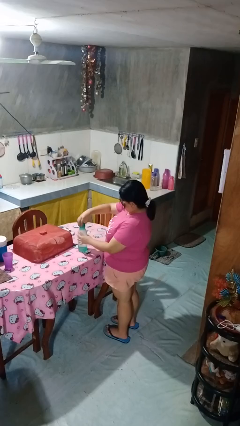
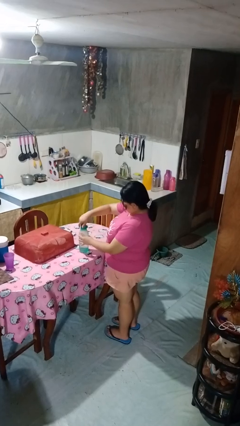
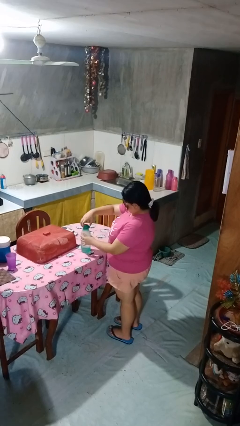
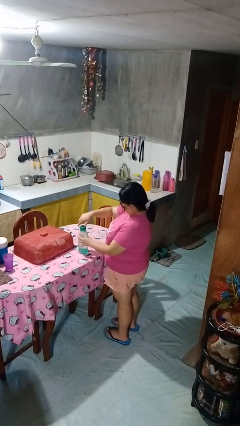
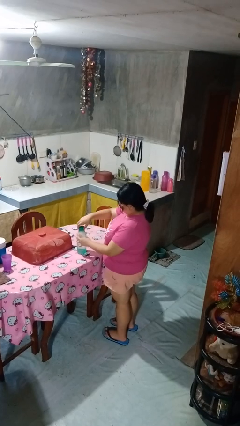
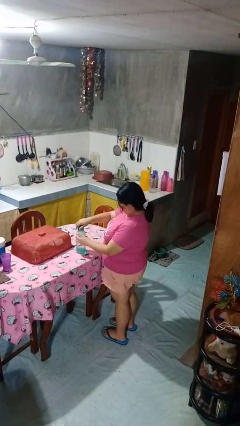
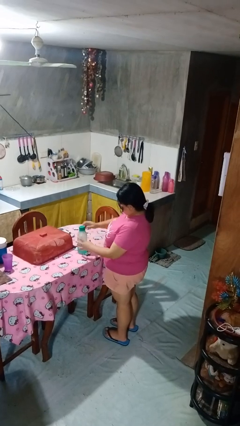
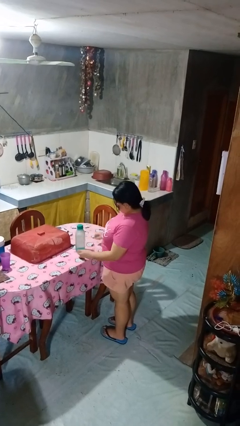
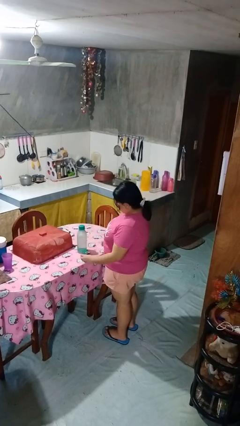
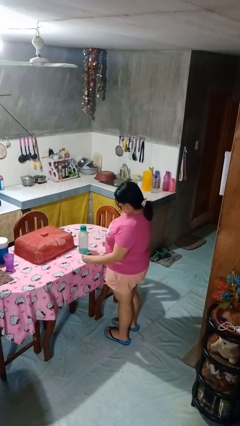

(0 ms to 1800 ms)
person screws lid to bottle

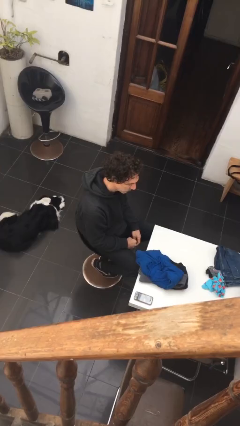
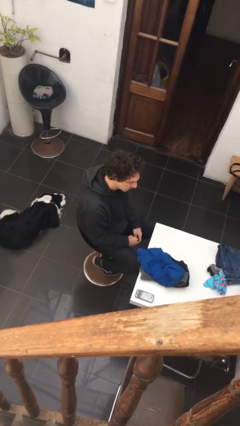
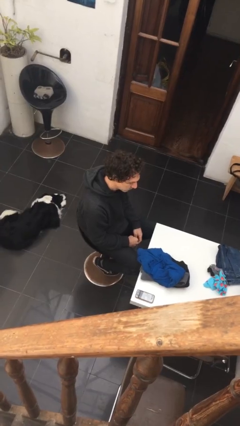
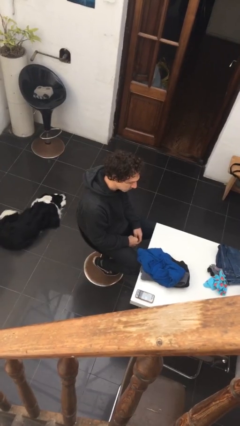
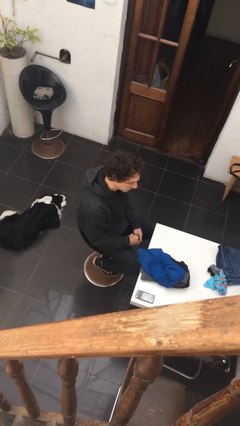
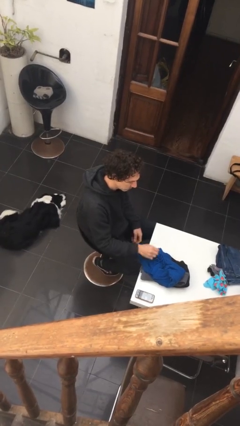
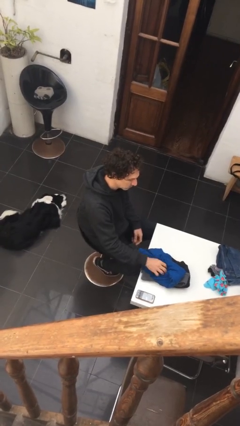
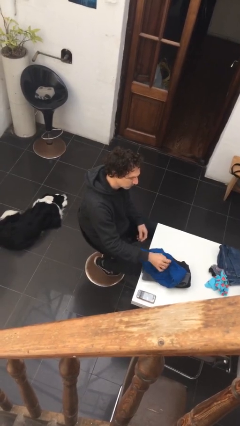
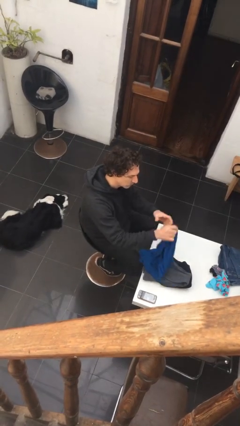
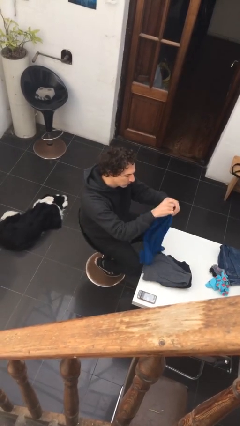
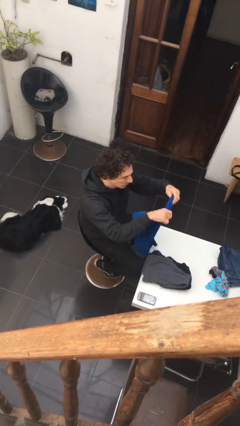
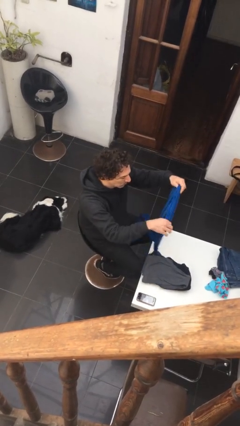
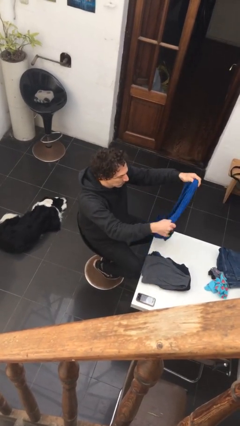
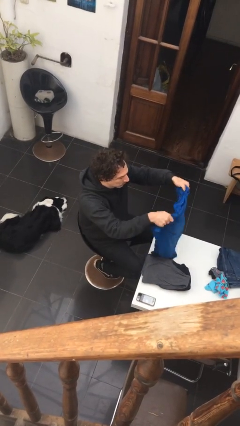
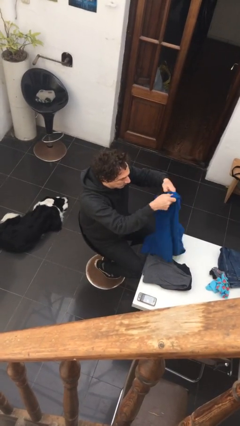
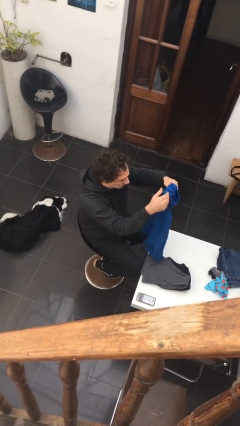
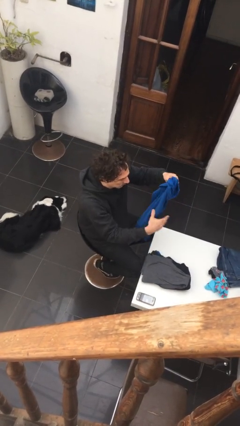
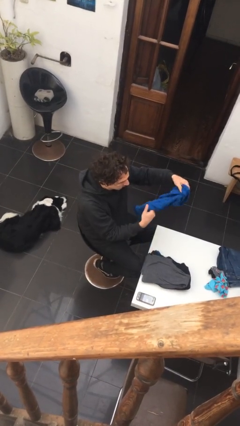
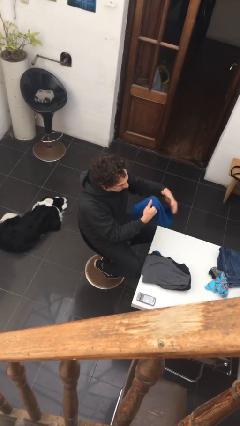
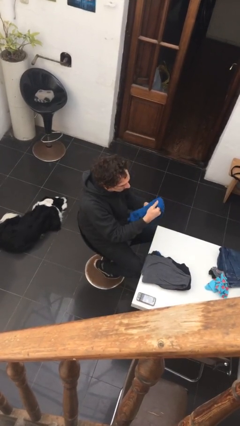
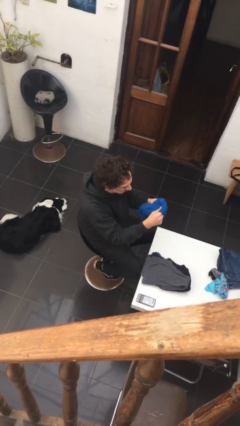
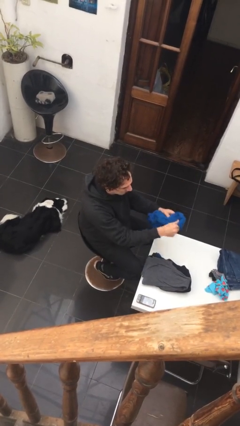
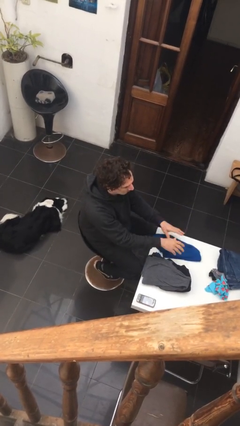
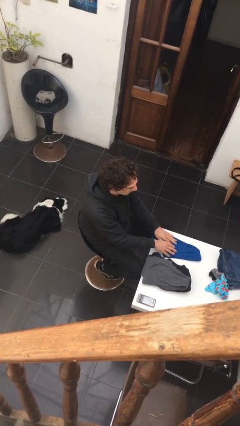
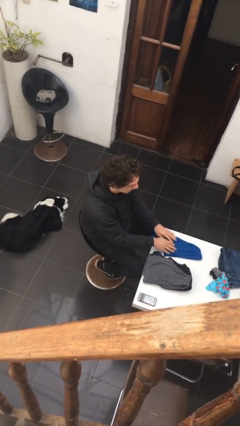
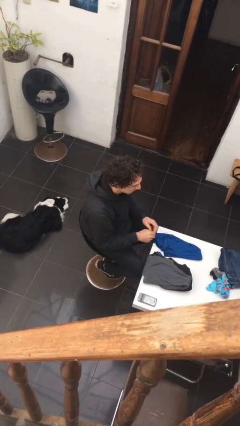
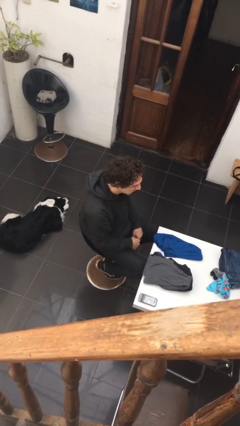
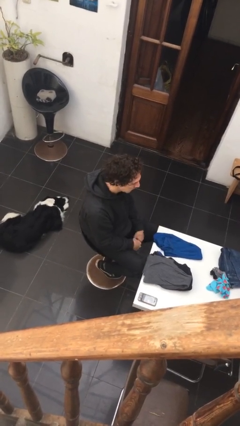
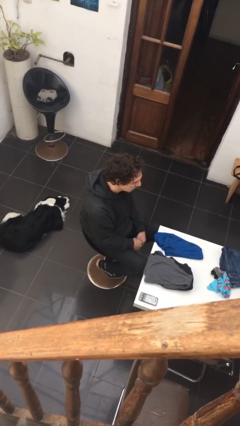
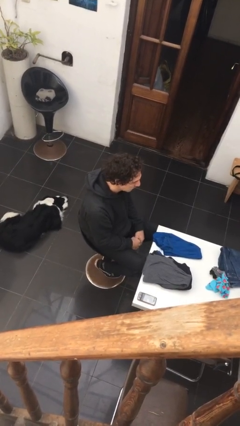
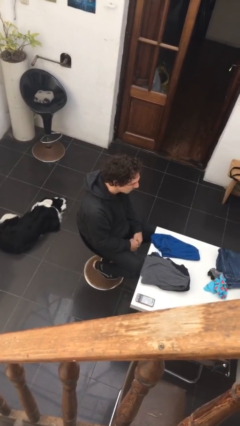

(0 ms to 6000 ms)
person folds shirt

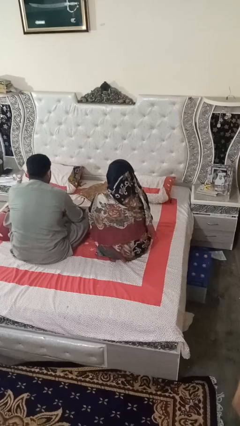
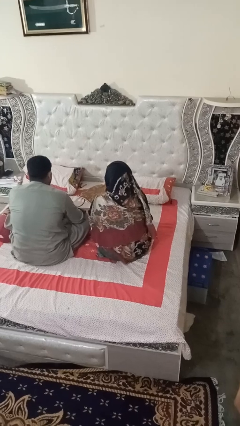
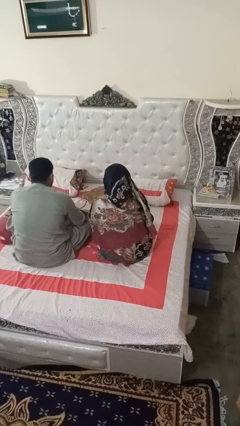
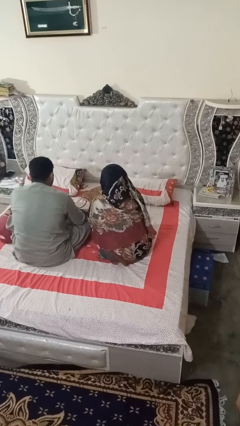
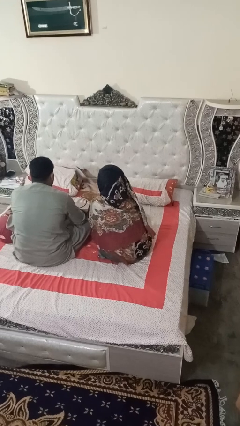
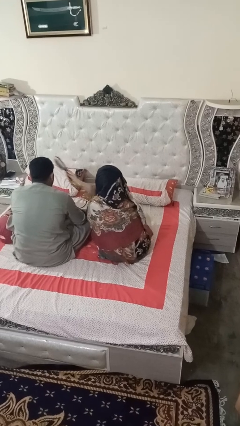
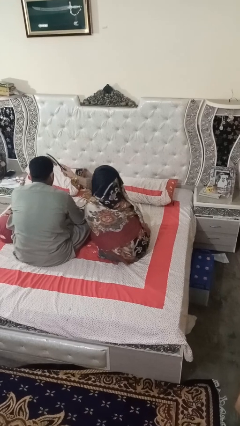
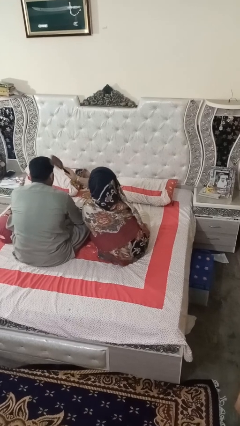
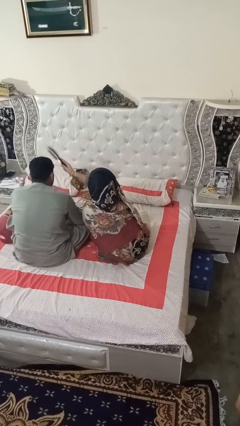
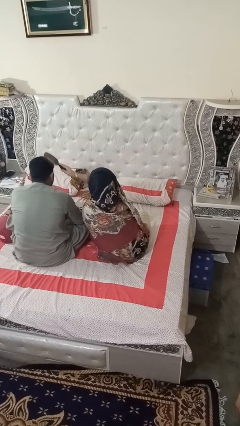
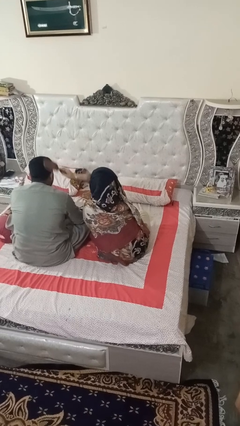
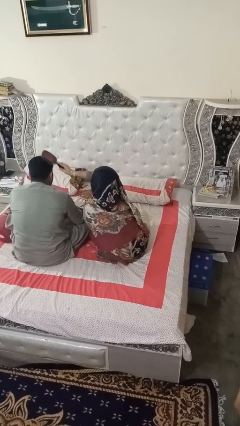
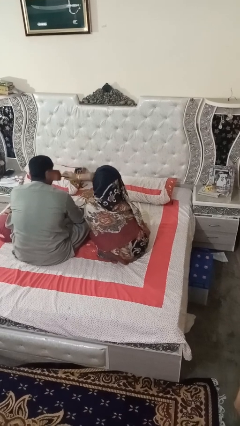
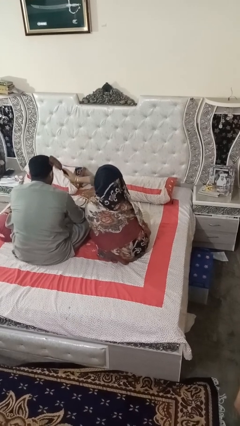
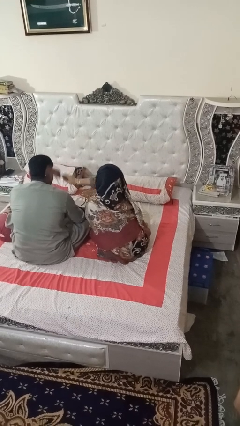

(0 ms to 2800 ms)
person brushes hair of person

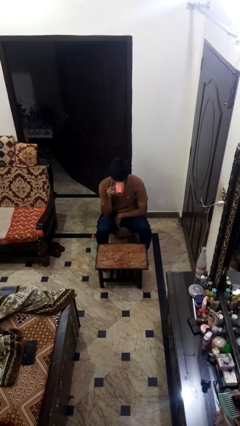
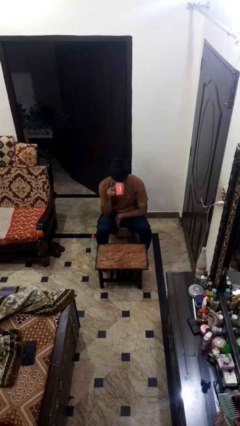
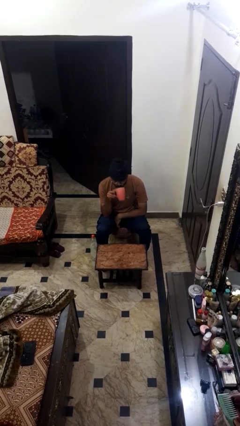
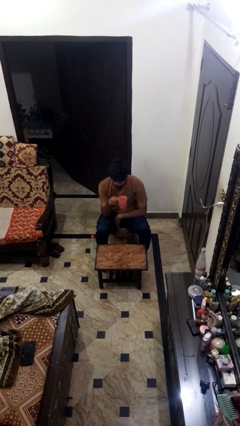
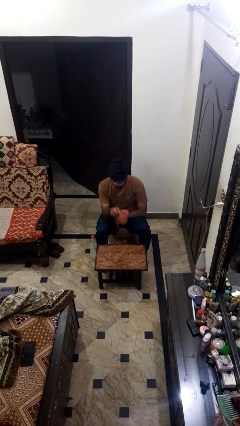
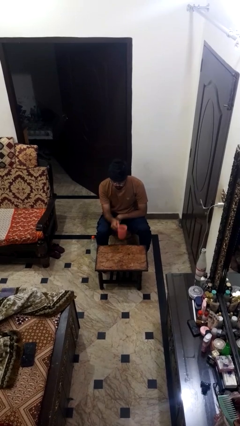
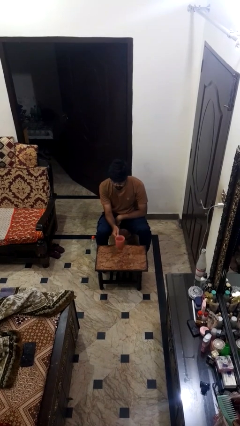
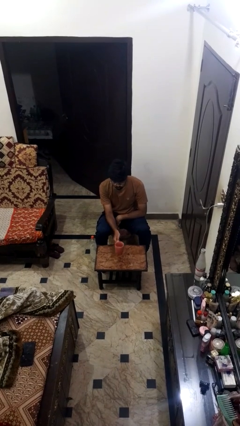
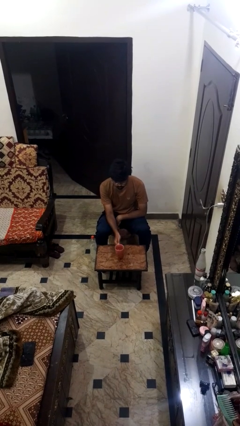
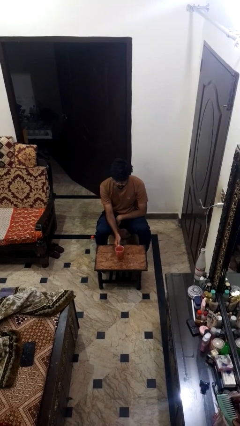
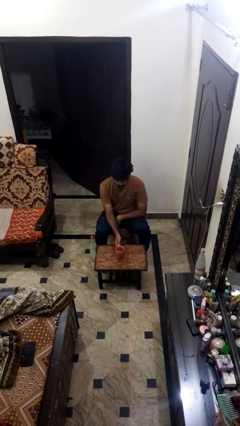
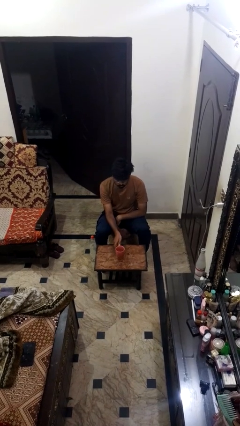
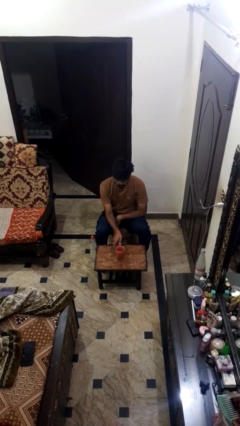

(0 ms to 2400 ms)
person puts down object on table

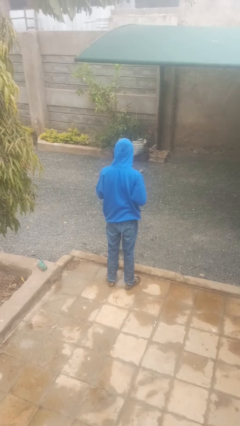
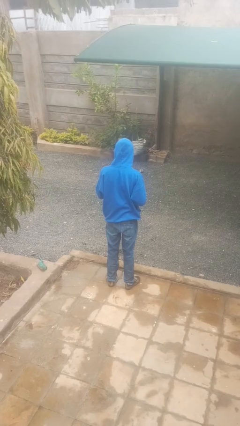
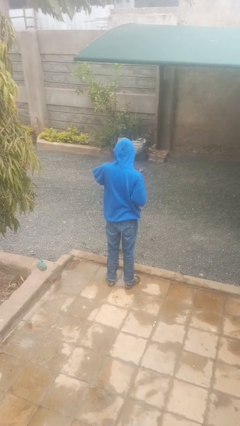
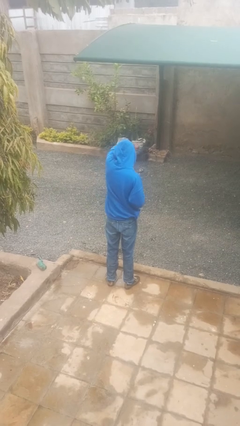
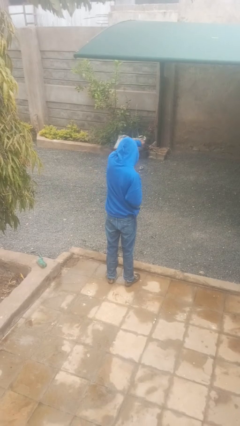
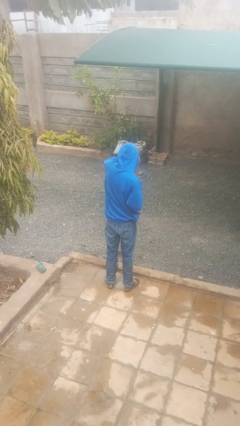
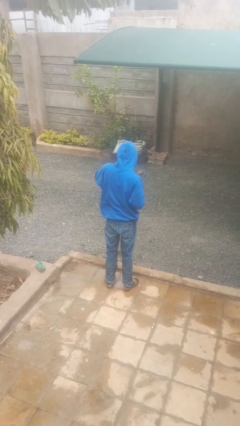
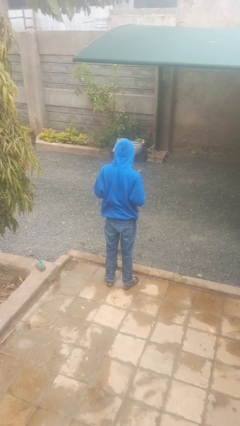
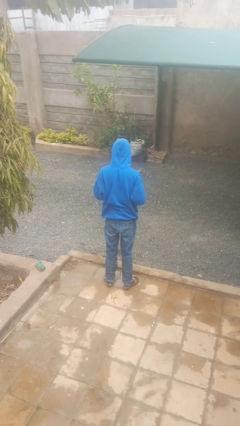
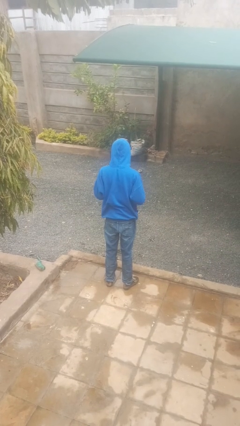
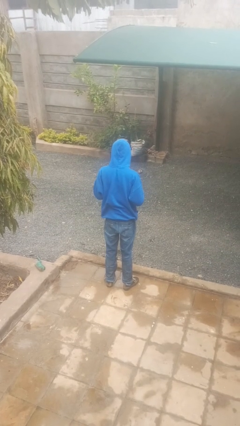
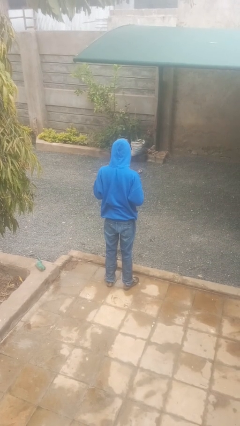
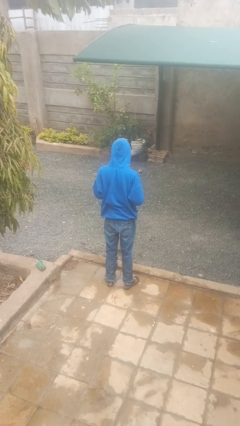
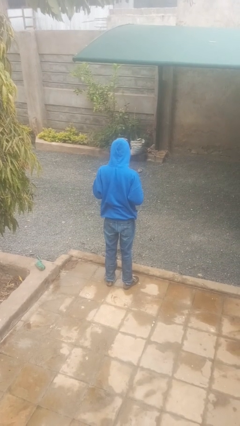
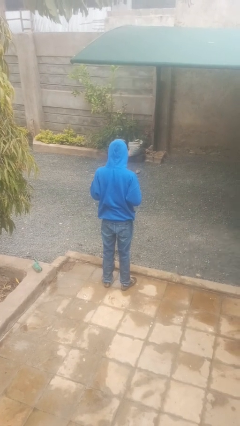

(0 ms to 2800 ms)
person punches

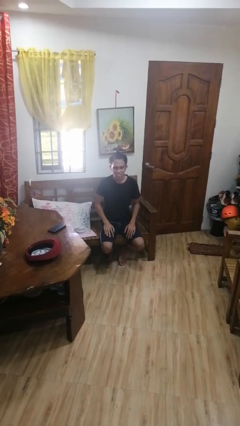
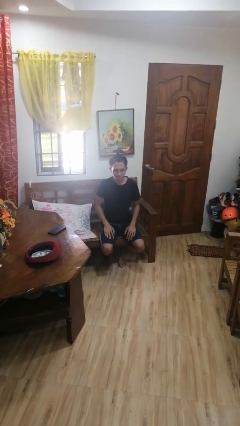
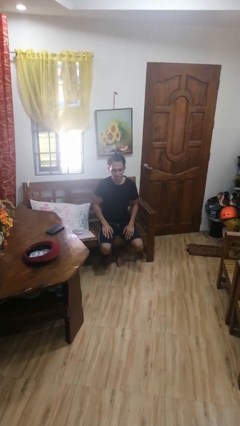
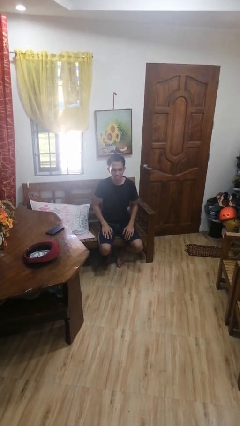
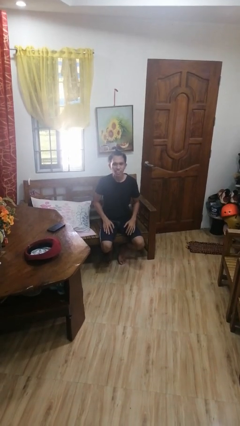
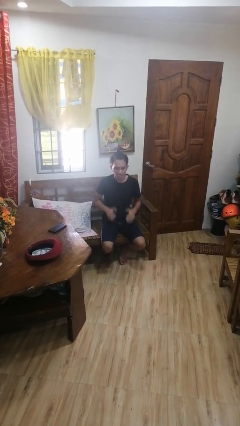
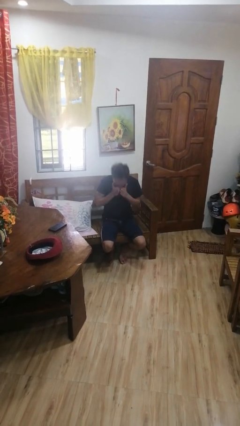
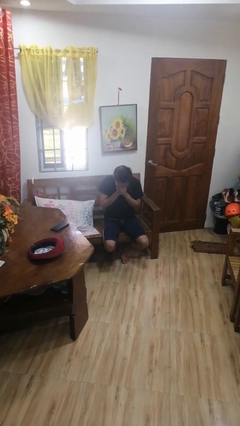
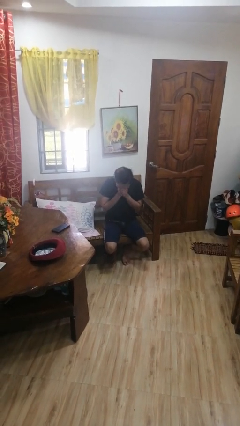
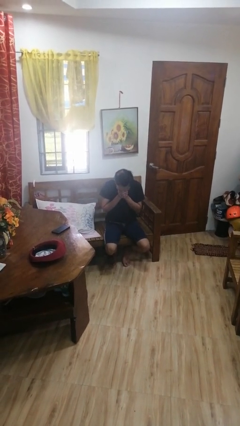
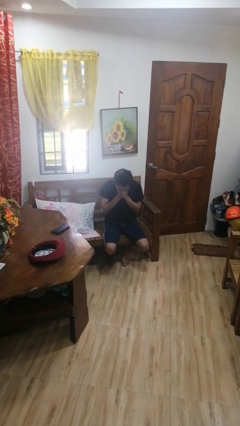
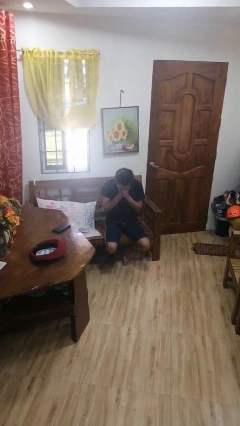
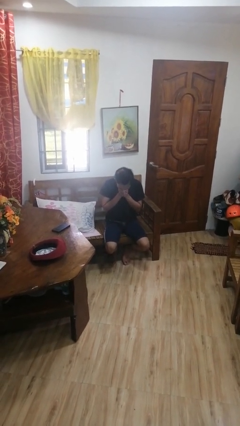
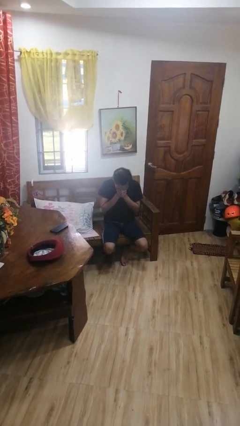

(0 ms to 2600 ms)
person sneezes into hand
